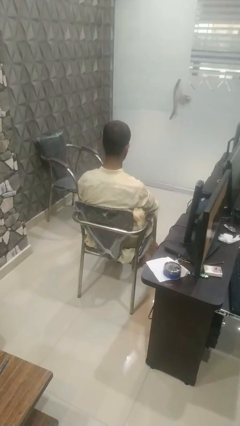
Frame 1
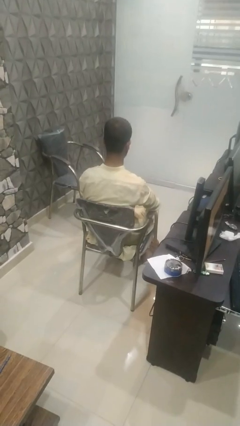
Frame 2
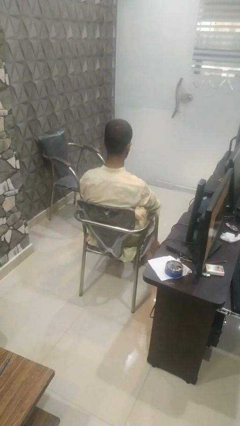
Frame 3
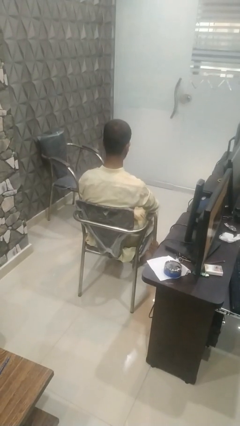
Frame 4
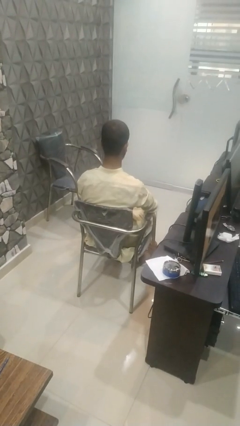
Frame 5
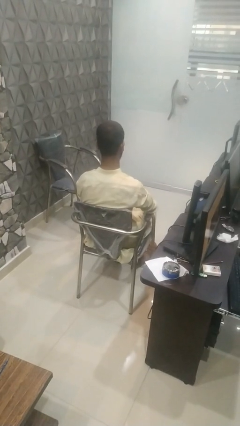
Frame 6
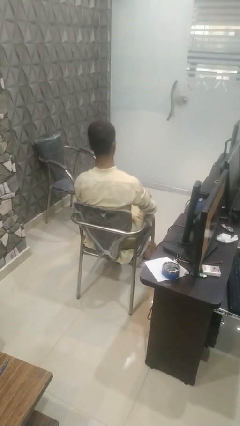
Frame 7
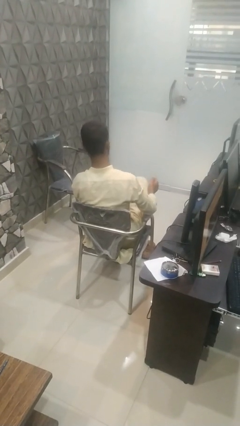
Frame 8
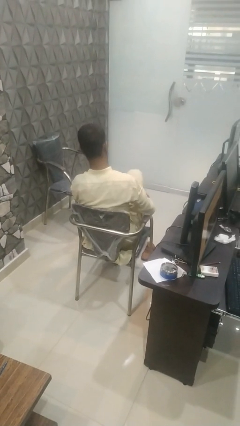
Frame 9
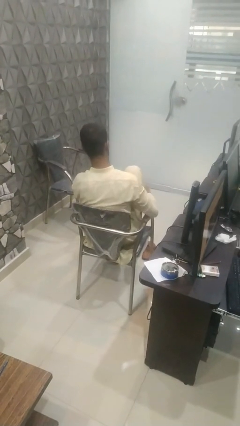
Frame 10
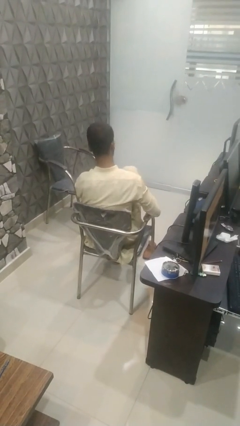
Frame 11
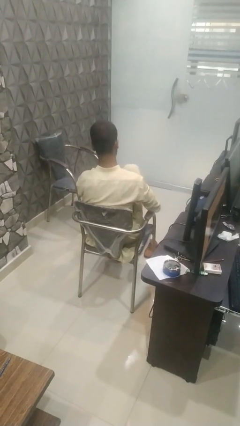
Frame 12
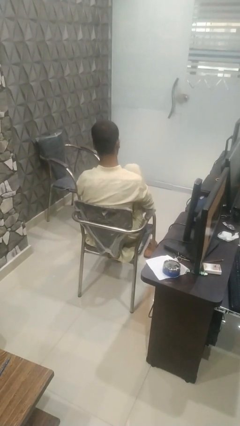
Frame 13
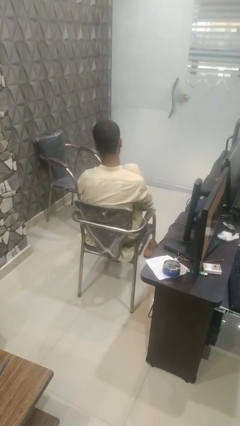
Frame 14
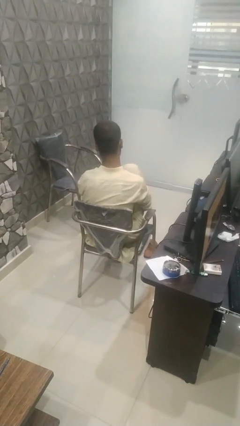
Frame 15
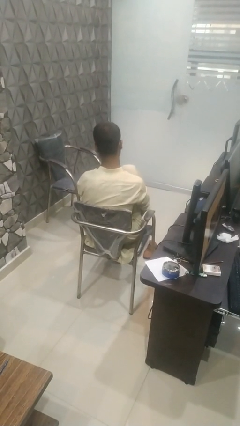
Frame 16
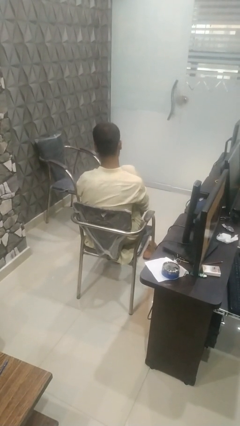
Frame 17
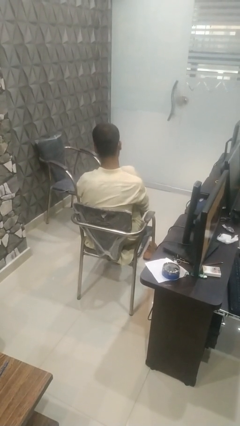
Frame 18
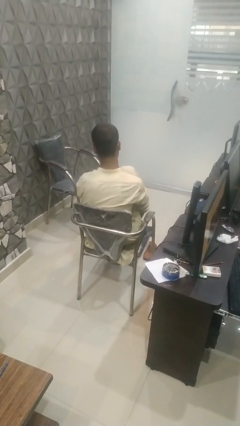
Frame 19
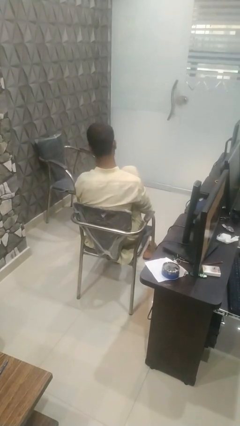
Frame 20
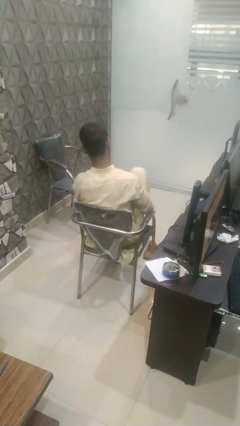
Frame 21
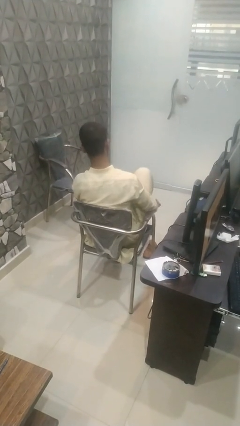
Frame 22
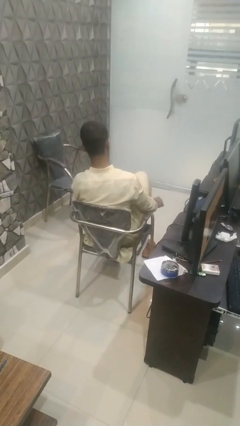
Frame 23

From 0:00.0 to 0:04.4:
person rubs foot

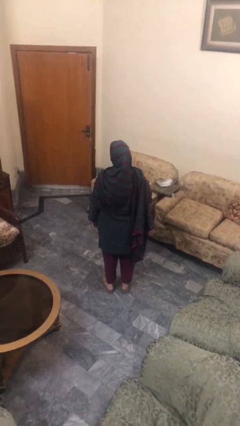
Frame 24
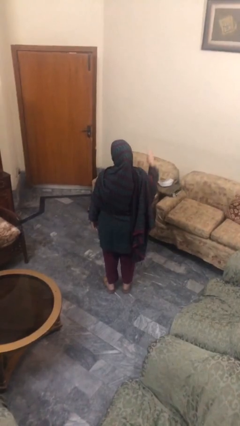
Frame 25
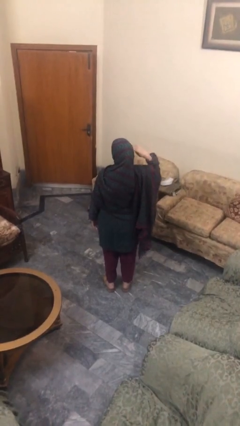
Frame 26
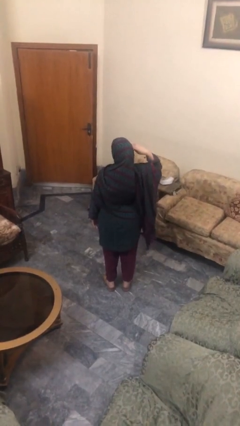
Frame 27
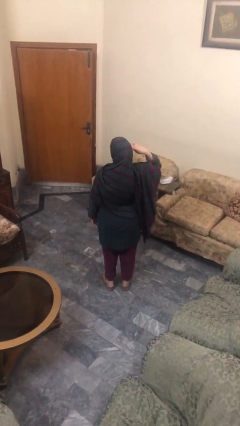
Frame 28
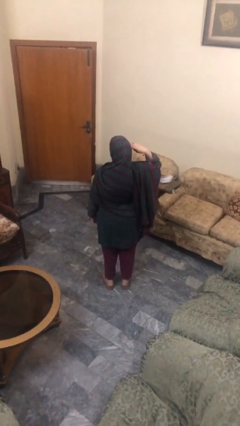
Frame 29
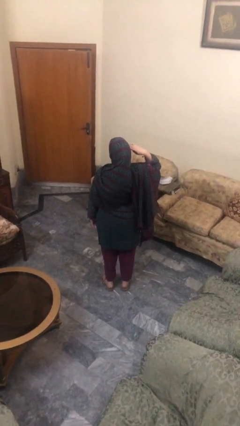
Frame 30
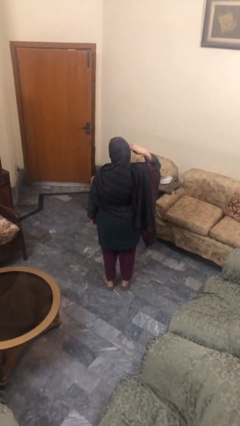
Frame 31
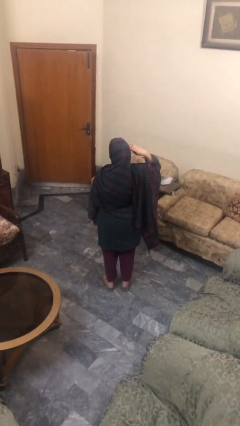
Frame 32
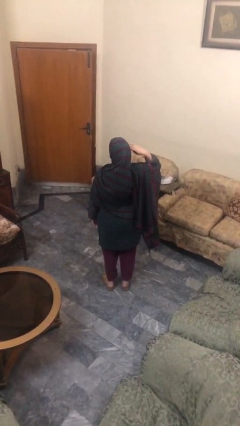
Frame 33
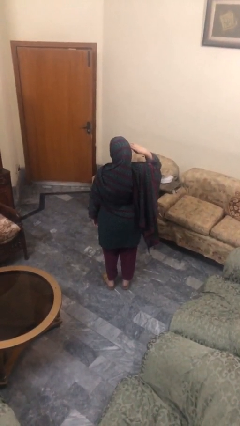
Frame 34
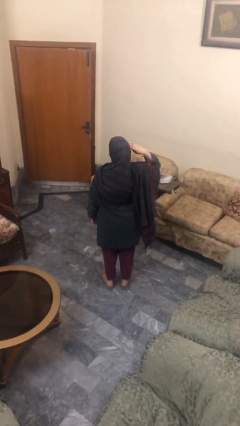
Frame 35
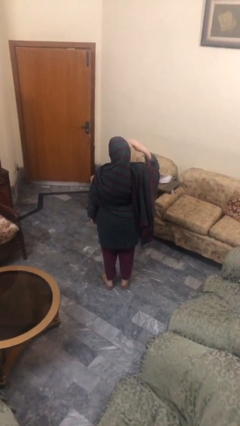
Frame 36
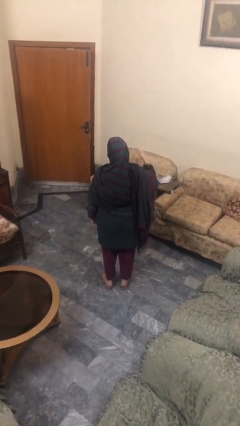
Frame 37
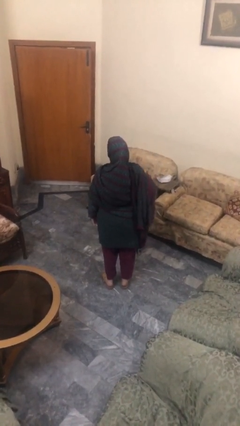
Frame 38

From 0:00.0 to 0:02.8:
person salutes

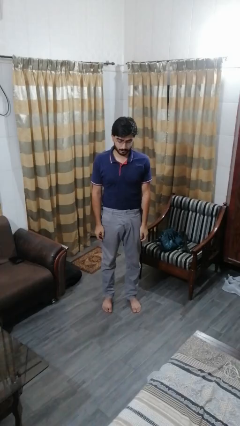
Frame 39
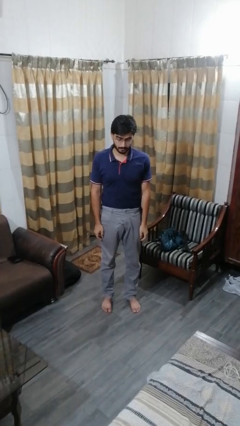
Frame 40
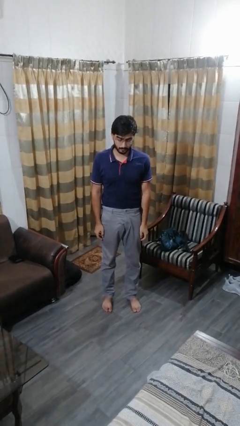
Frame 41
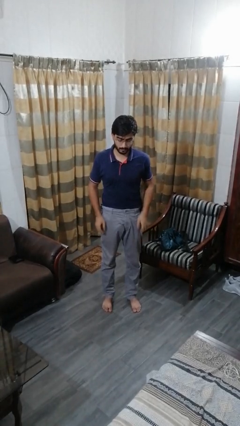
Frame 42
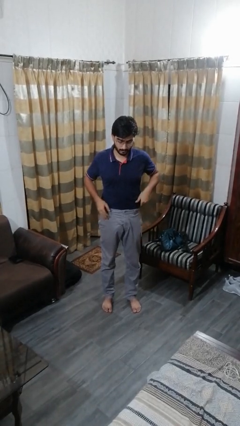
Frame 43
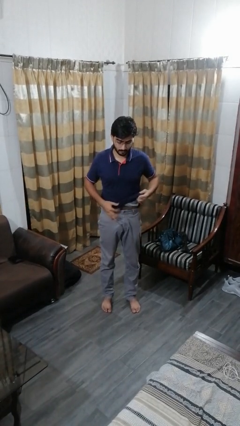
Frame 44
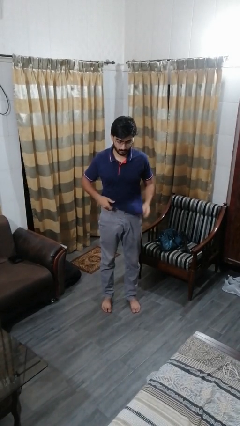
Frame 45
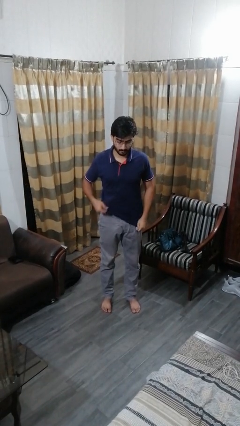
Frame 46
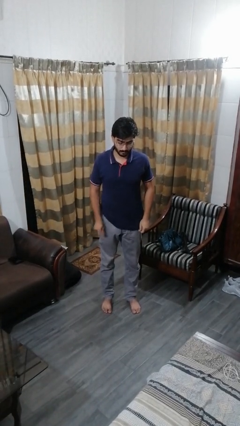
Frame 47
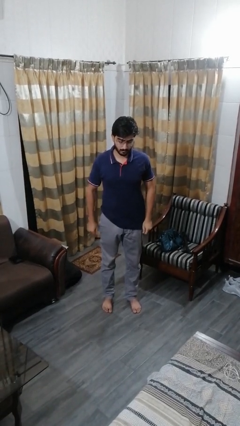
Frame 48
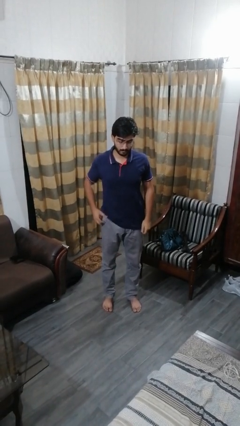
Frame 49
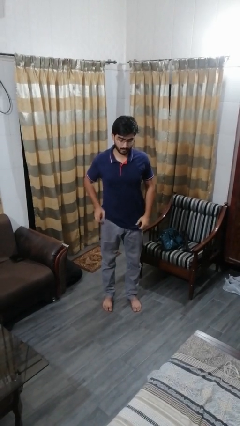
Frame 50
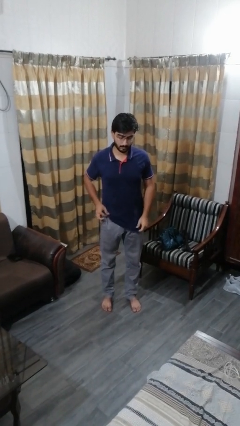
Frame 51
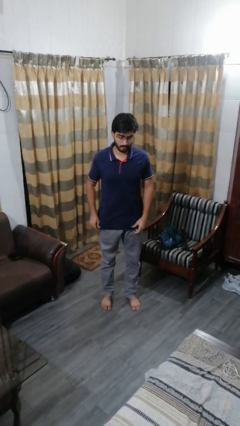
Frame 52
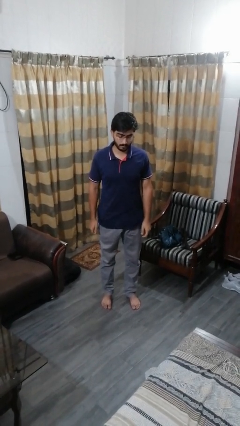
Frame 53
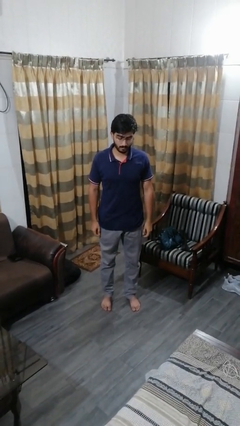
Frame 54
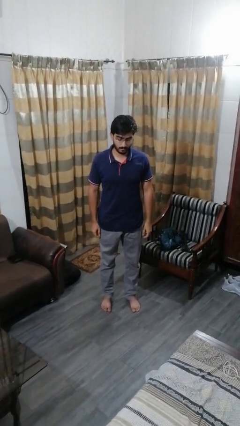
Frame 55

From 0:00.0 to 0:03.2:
person untucks shirt

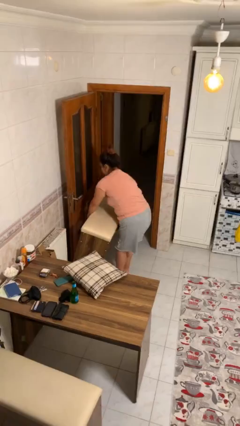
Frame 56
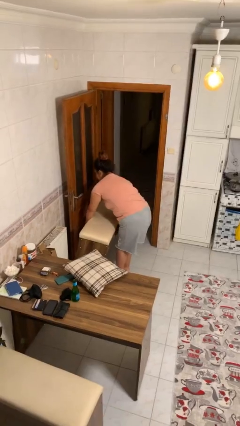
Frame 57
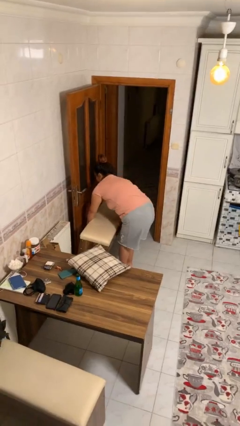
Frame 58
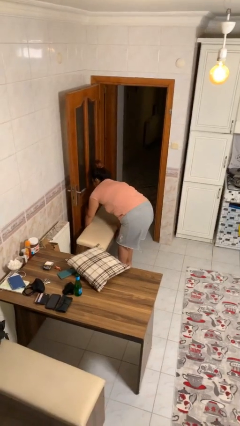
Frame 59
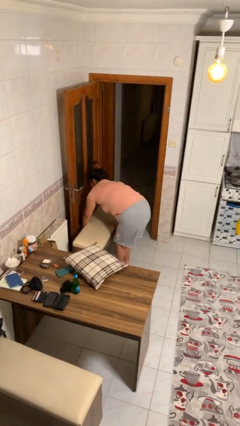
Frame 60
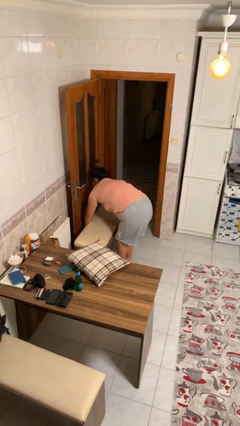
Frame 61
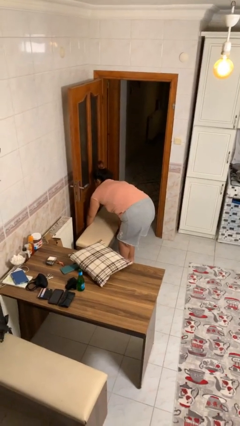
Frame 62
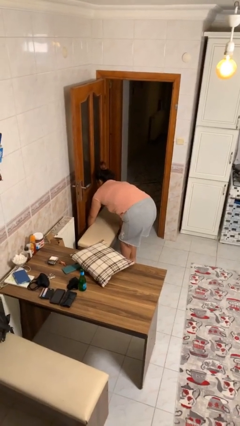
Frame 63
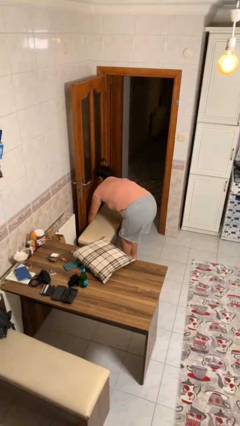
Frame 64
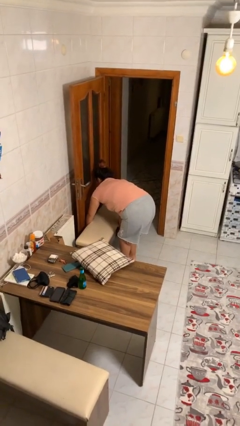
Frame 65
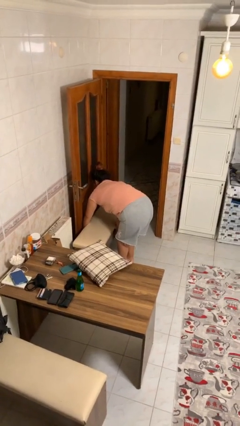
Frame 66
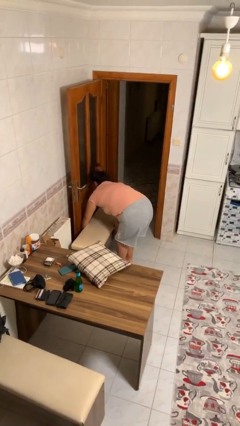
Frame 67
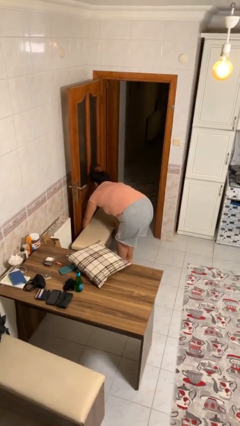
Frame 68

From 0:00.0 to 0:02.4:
person puts down object on floor

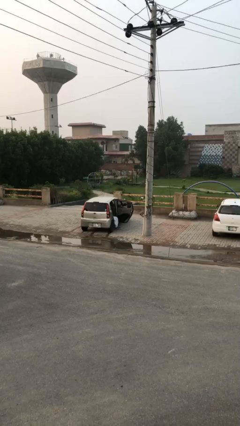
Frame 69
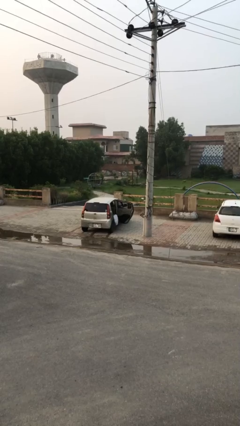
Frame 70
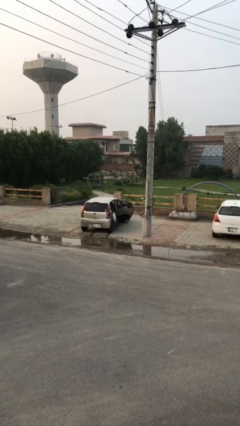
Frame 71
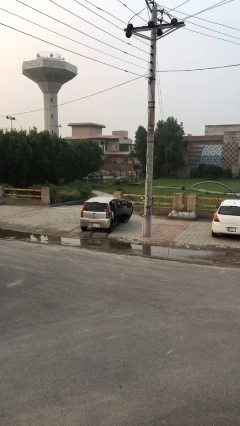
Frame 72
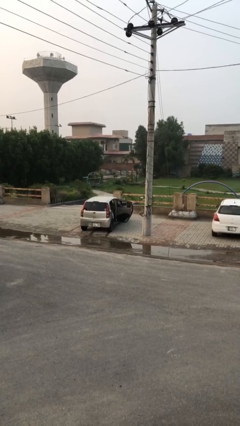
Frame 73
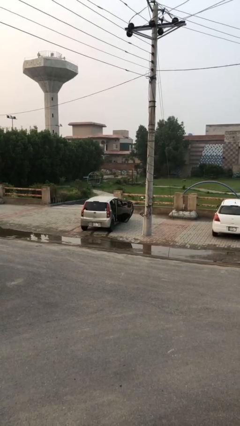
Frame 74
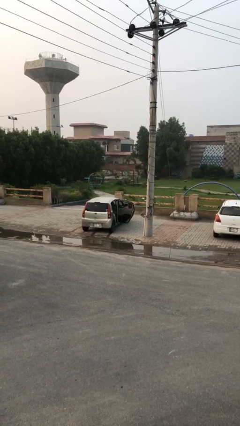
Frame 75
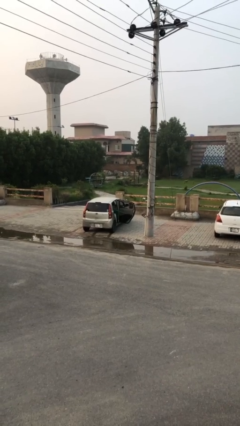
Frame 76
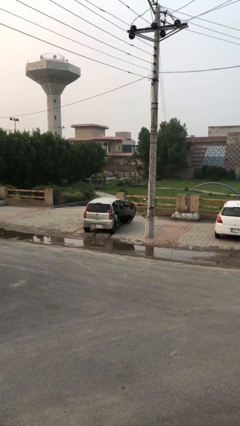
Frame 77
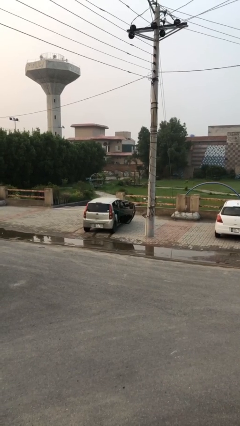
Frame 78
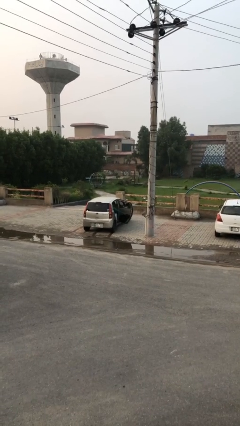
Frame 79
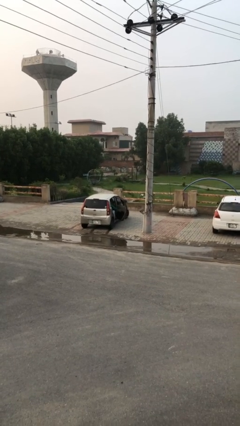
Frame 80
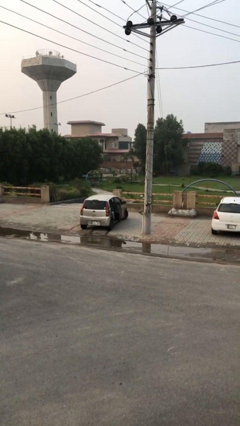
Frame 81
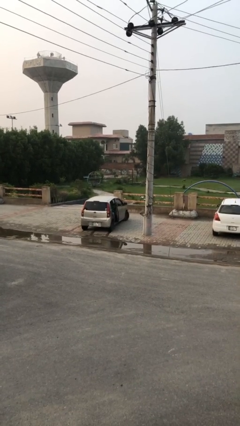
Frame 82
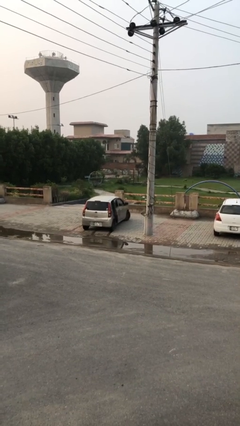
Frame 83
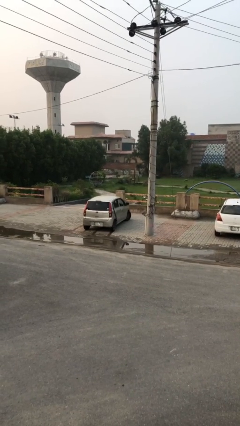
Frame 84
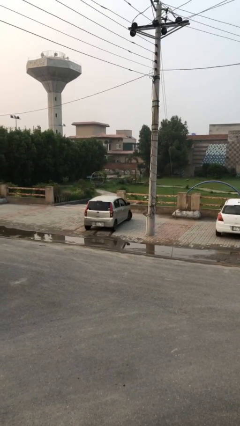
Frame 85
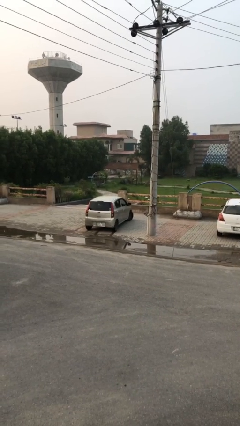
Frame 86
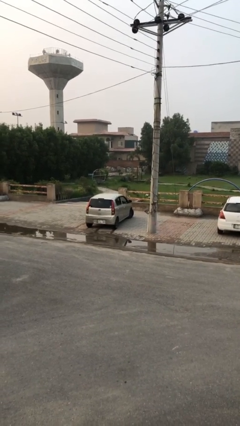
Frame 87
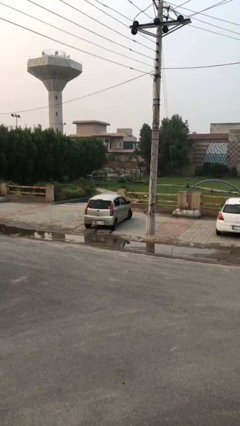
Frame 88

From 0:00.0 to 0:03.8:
person closes car door

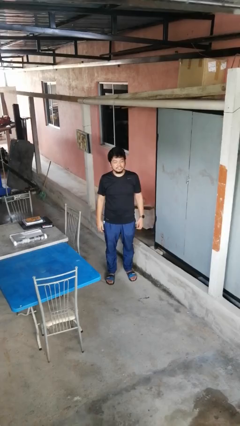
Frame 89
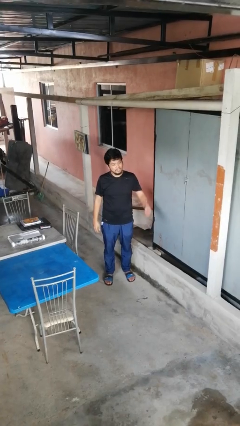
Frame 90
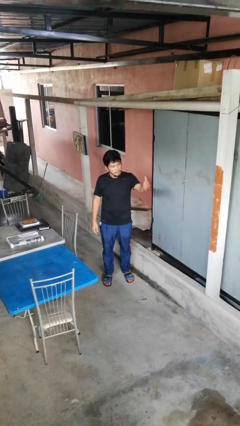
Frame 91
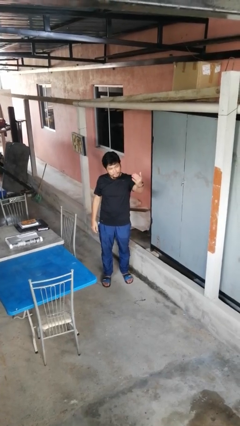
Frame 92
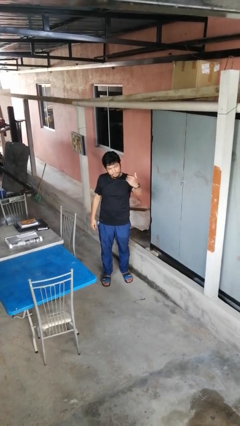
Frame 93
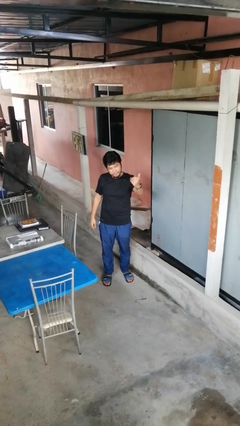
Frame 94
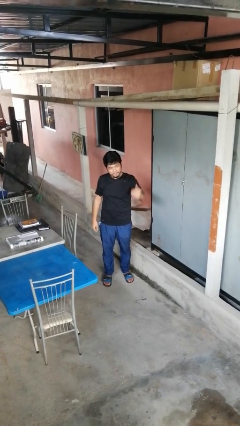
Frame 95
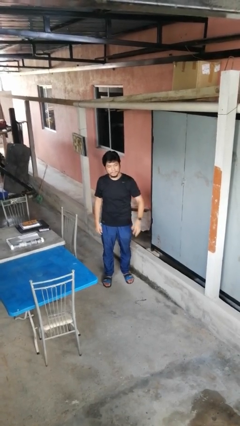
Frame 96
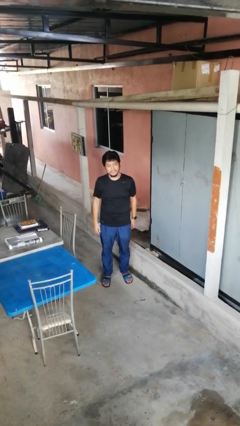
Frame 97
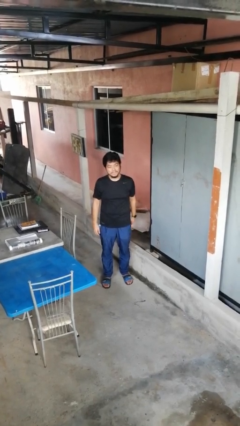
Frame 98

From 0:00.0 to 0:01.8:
person gestures come here
